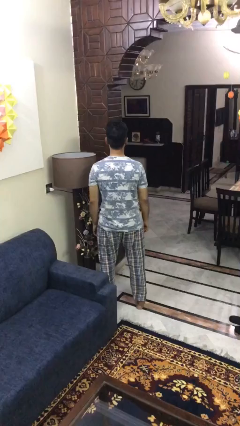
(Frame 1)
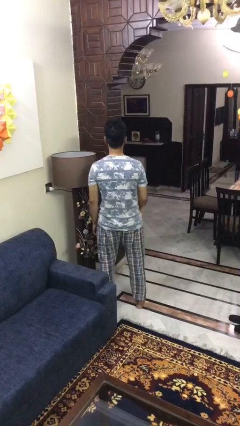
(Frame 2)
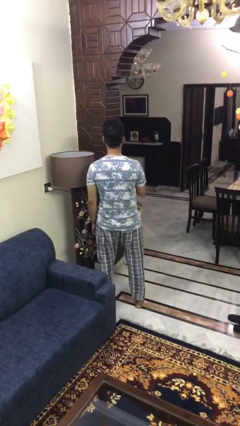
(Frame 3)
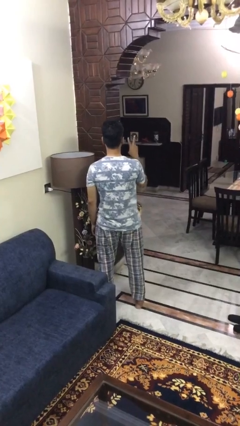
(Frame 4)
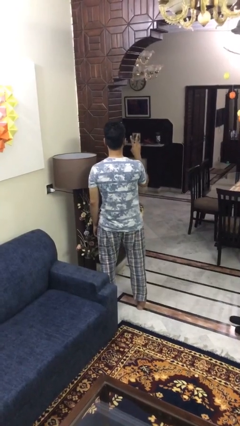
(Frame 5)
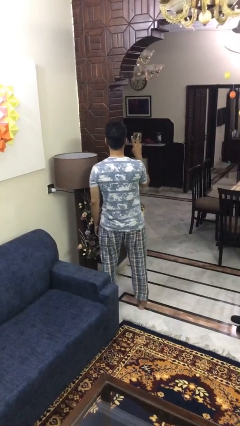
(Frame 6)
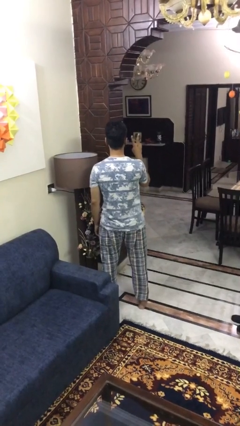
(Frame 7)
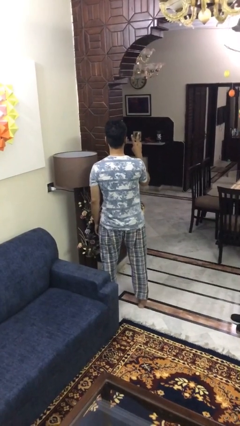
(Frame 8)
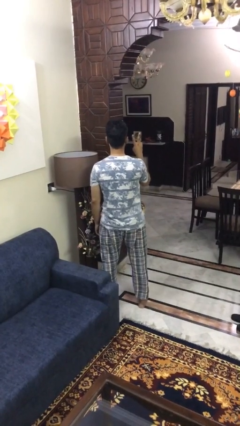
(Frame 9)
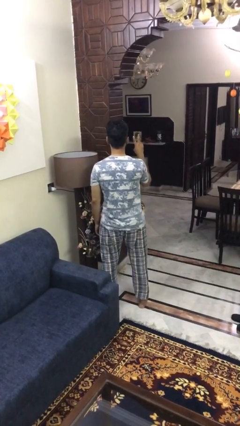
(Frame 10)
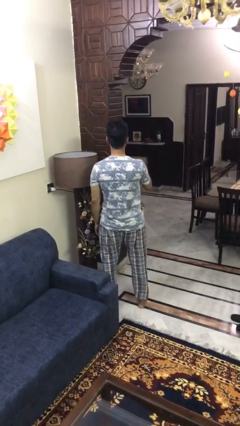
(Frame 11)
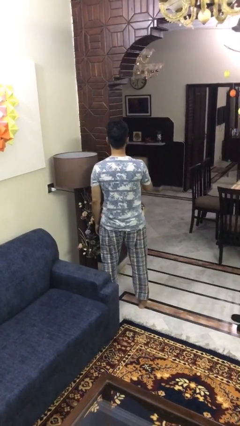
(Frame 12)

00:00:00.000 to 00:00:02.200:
person gestures peace

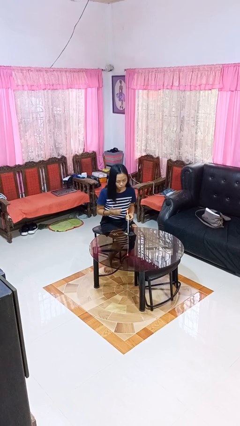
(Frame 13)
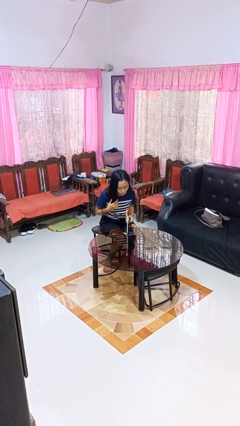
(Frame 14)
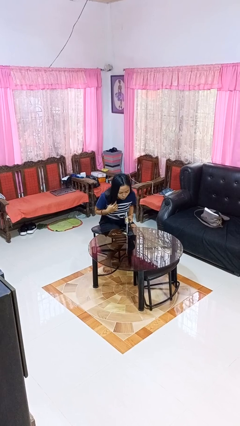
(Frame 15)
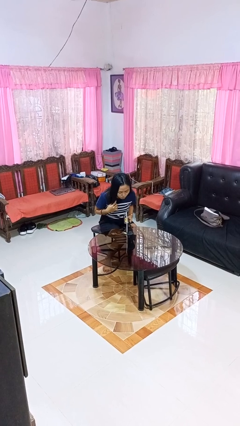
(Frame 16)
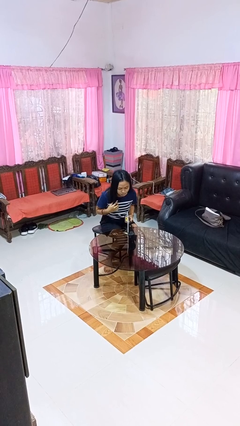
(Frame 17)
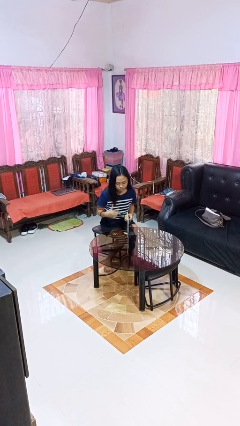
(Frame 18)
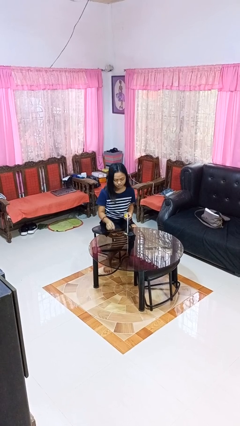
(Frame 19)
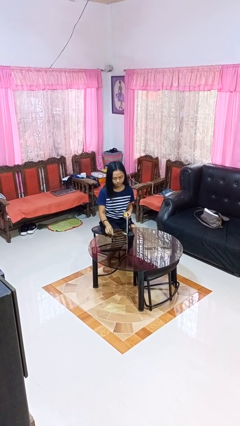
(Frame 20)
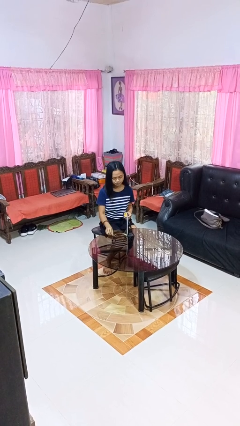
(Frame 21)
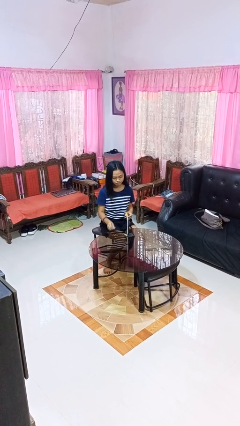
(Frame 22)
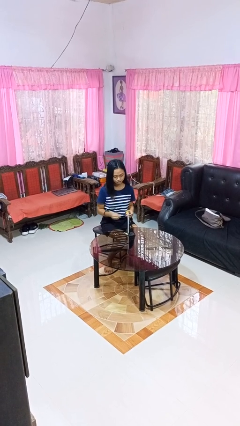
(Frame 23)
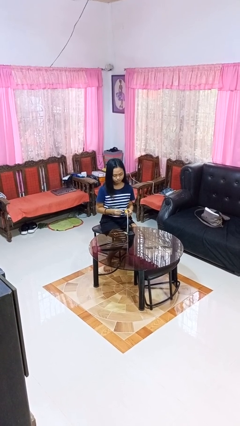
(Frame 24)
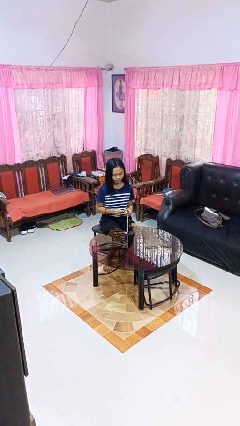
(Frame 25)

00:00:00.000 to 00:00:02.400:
person extinguishes candle

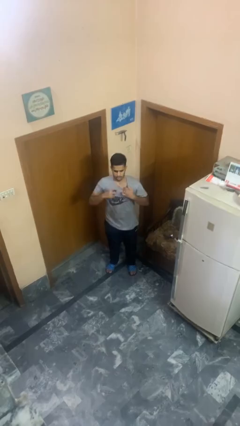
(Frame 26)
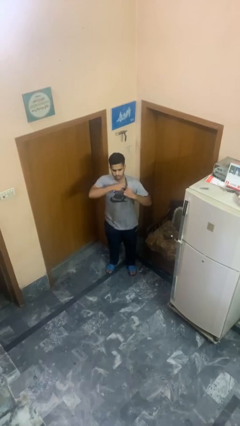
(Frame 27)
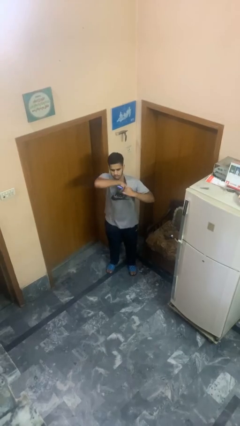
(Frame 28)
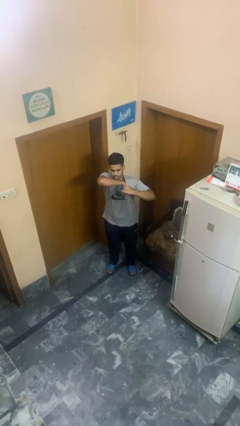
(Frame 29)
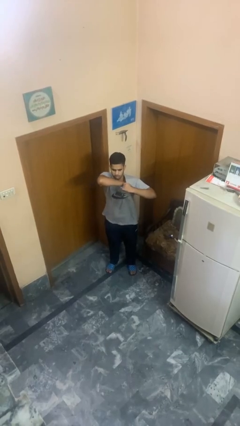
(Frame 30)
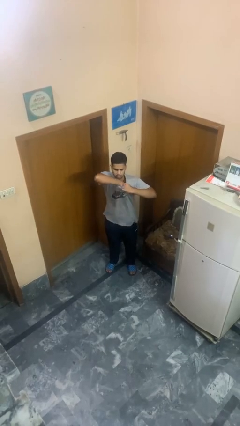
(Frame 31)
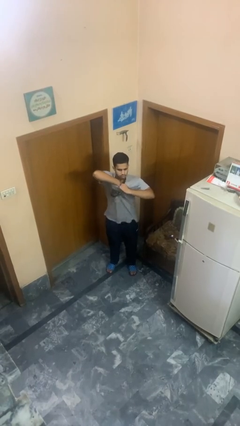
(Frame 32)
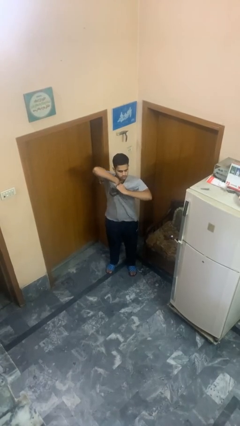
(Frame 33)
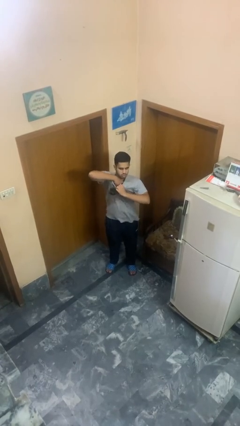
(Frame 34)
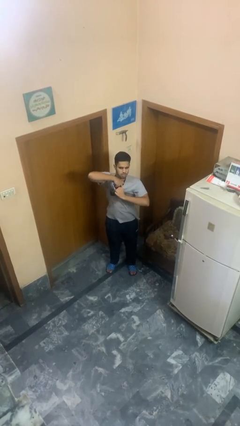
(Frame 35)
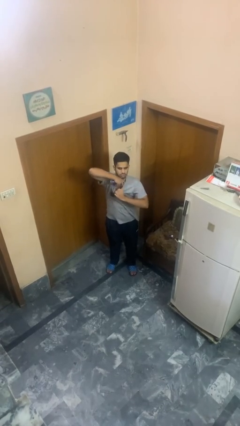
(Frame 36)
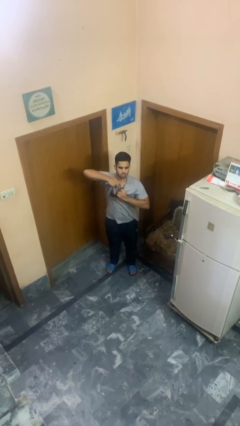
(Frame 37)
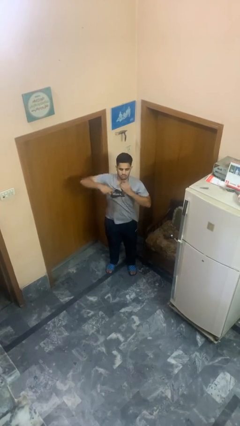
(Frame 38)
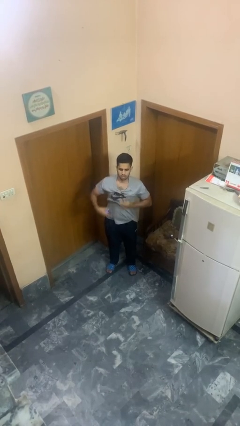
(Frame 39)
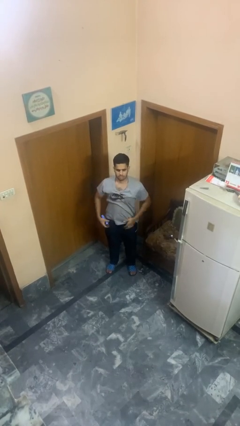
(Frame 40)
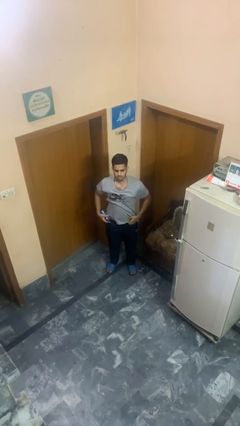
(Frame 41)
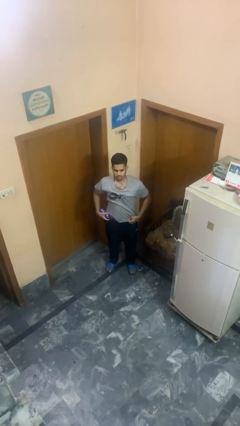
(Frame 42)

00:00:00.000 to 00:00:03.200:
person applies deodorant

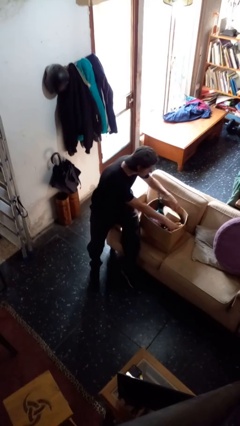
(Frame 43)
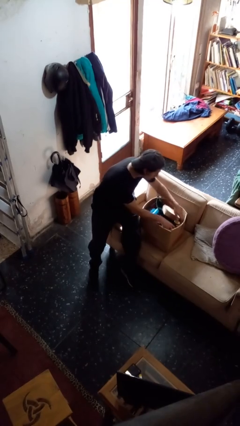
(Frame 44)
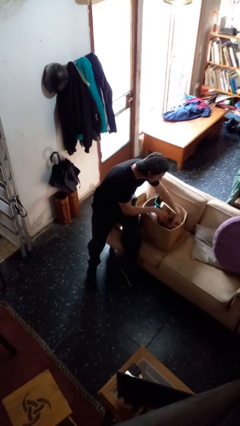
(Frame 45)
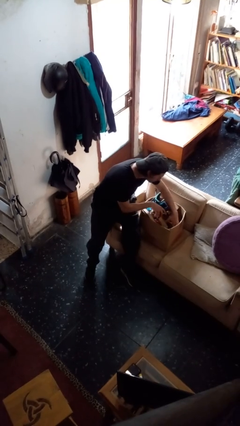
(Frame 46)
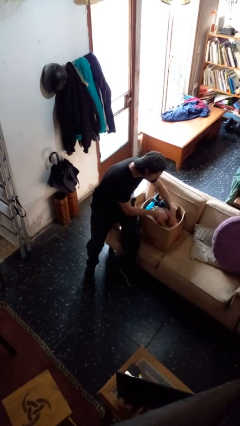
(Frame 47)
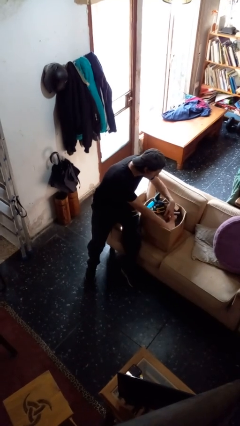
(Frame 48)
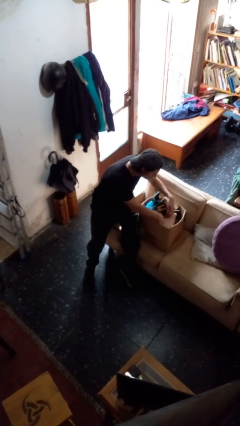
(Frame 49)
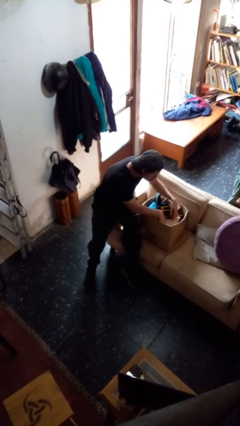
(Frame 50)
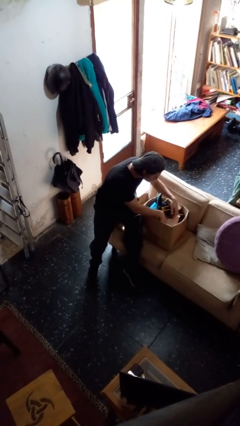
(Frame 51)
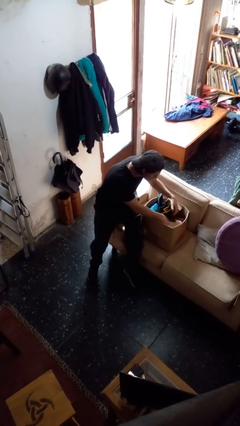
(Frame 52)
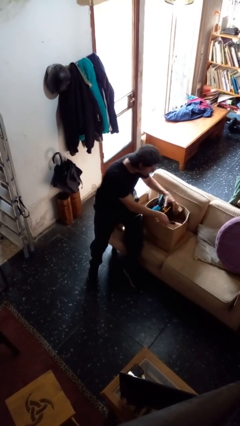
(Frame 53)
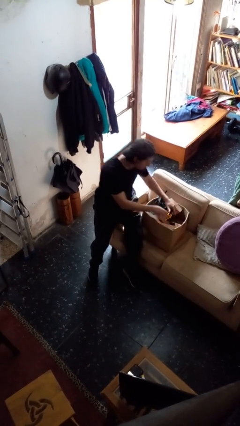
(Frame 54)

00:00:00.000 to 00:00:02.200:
person searches in box

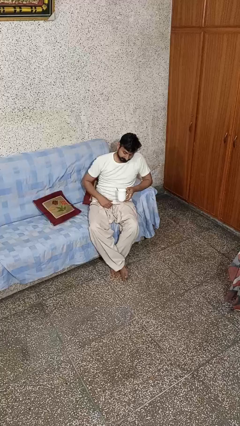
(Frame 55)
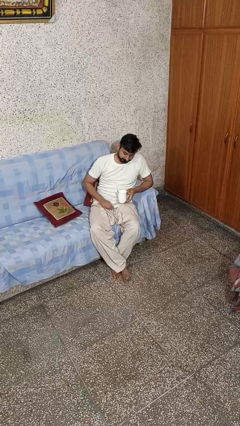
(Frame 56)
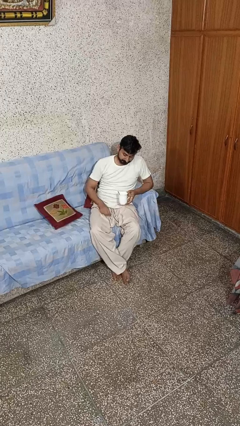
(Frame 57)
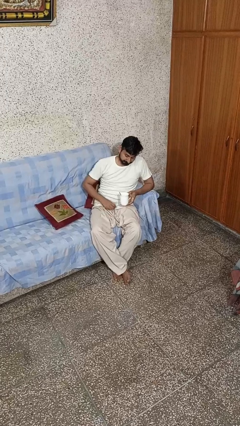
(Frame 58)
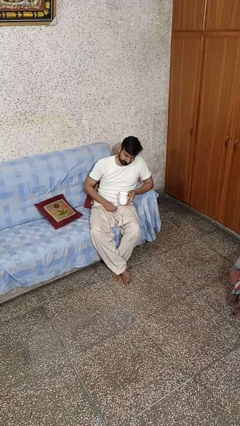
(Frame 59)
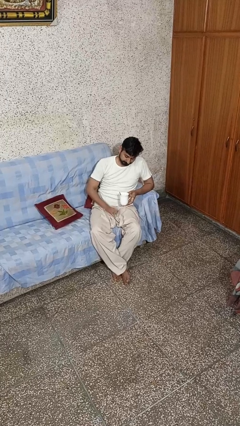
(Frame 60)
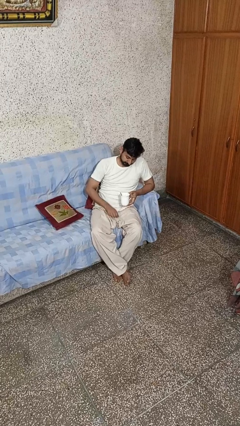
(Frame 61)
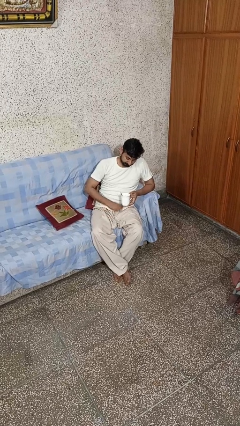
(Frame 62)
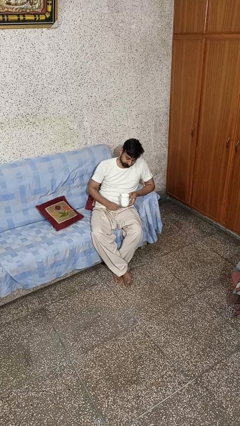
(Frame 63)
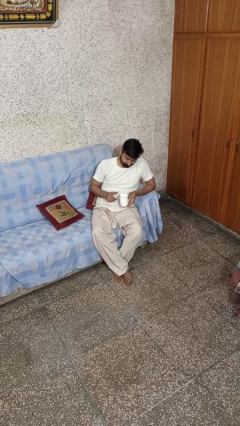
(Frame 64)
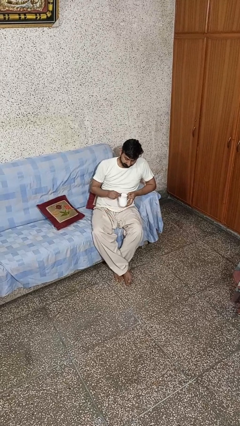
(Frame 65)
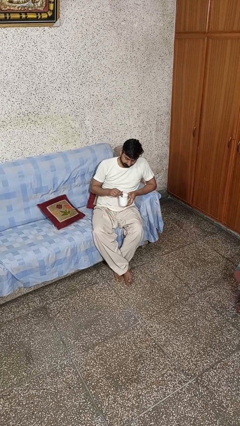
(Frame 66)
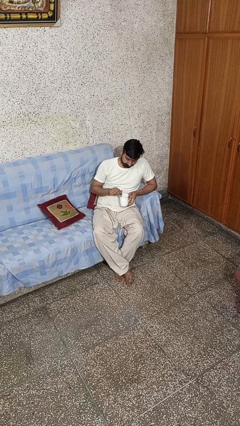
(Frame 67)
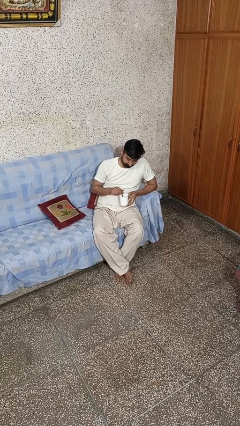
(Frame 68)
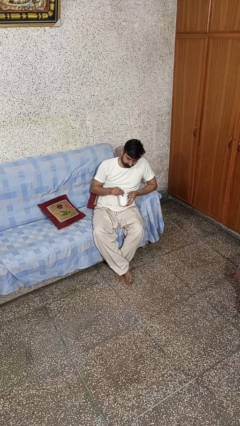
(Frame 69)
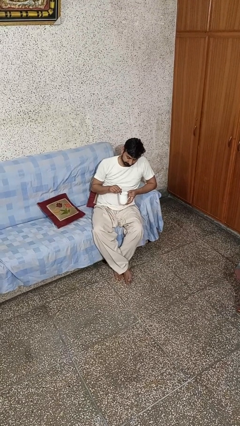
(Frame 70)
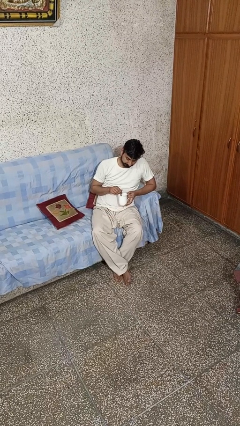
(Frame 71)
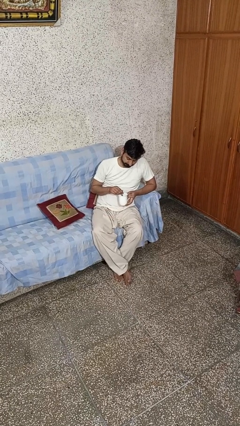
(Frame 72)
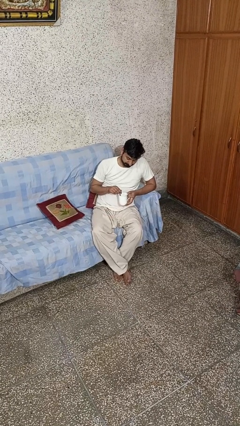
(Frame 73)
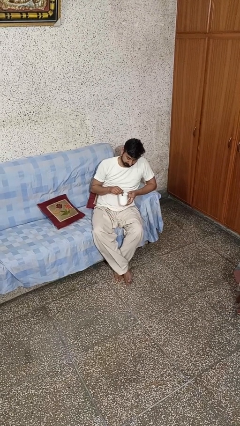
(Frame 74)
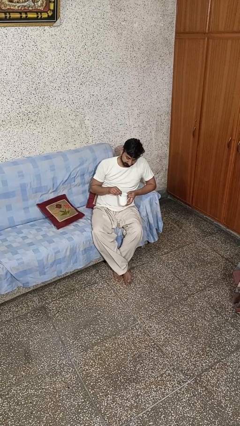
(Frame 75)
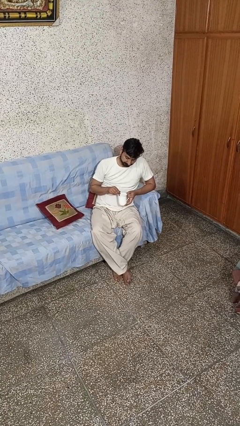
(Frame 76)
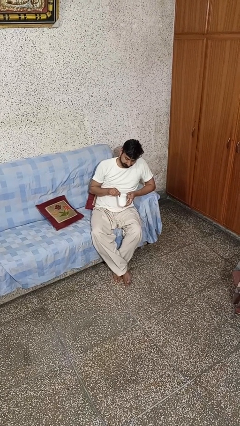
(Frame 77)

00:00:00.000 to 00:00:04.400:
person stirs mug

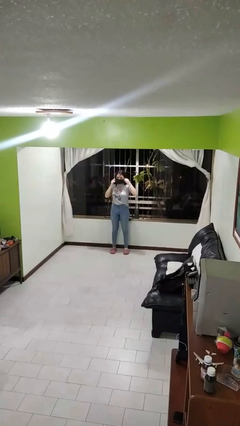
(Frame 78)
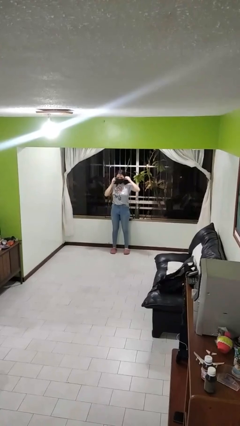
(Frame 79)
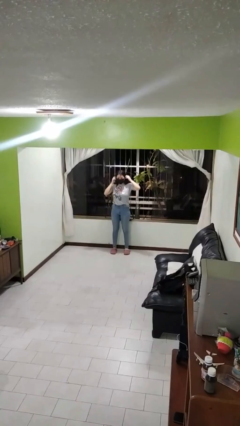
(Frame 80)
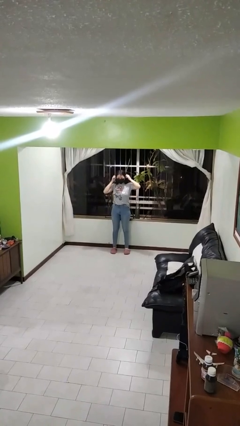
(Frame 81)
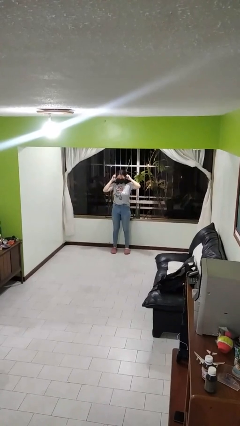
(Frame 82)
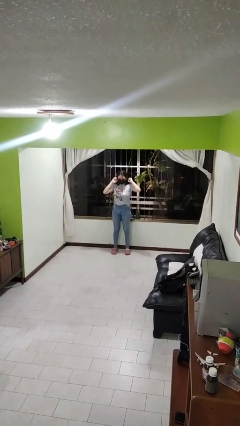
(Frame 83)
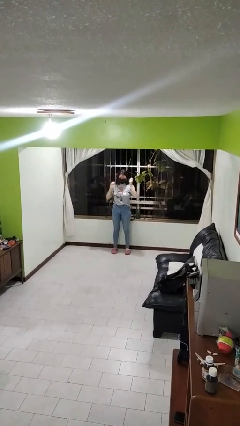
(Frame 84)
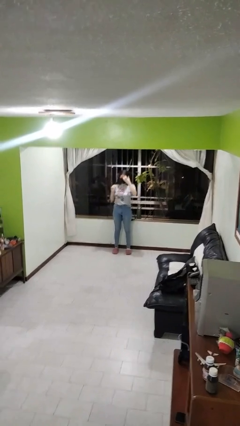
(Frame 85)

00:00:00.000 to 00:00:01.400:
person puts on facemask

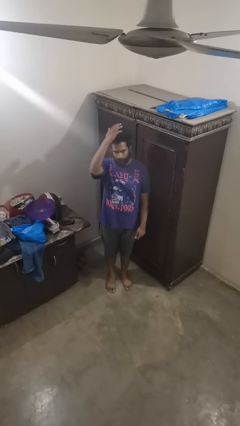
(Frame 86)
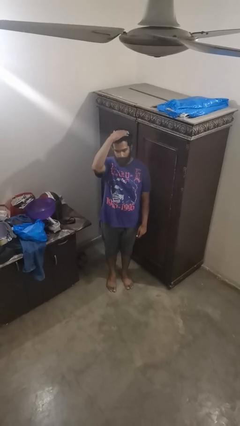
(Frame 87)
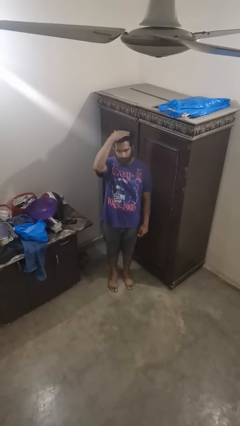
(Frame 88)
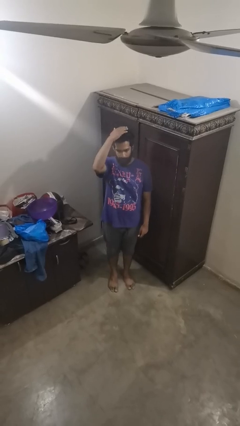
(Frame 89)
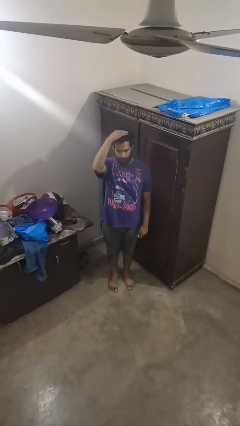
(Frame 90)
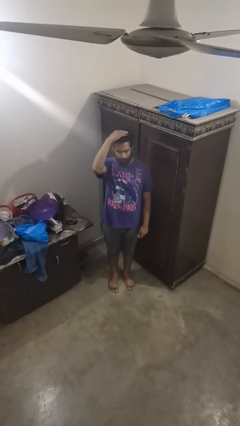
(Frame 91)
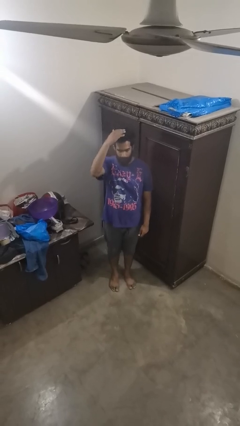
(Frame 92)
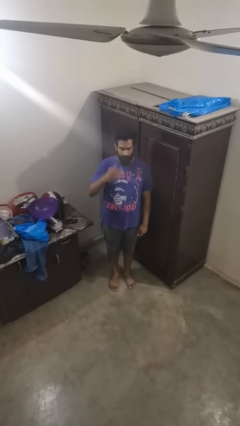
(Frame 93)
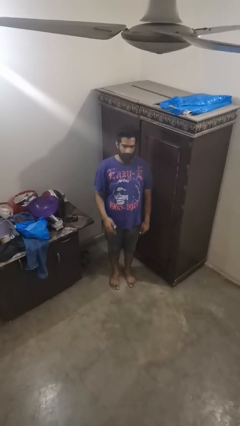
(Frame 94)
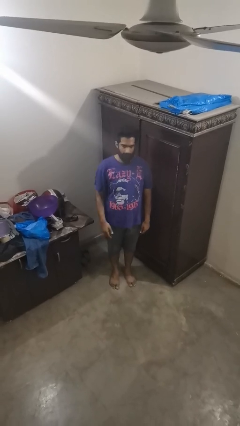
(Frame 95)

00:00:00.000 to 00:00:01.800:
person pats head
